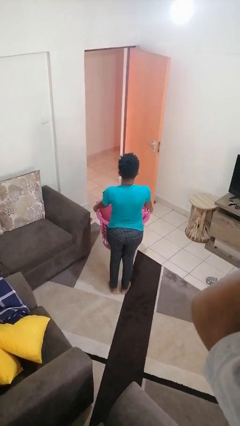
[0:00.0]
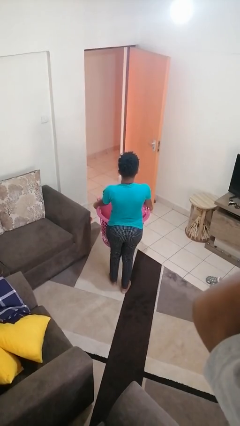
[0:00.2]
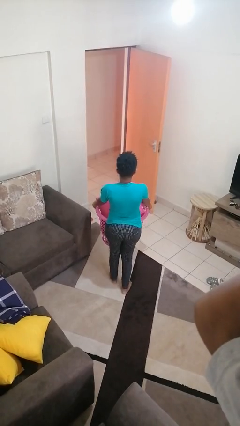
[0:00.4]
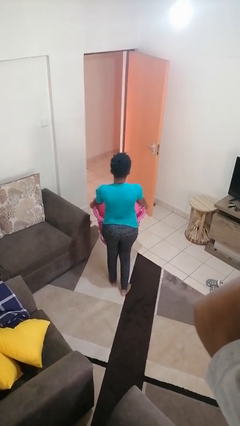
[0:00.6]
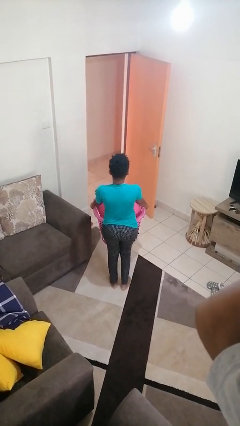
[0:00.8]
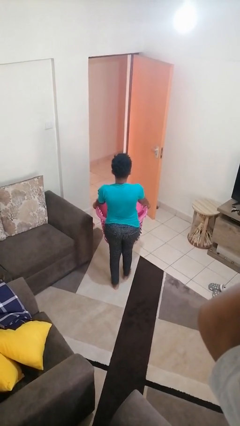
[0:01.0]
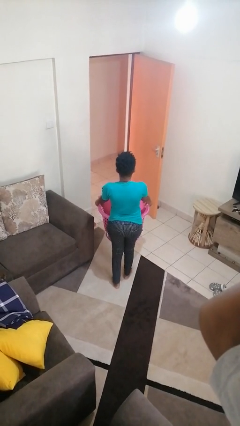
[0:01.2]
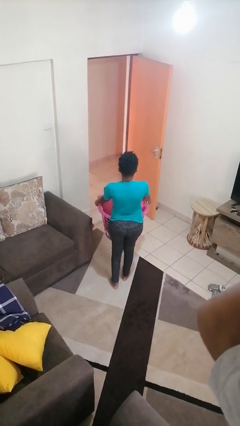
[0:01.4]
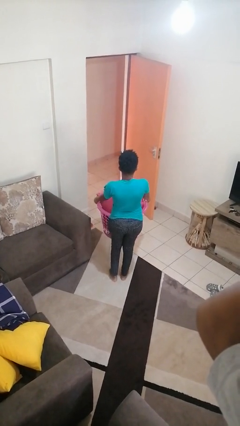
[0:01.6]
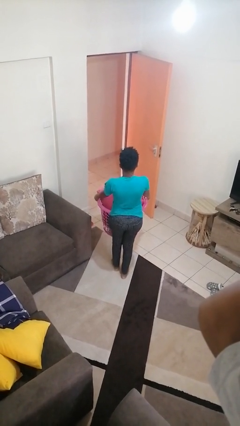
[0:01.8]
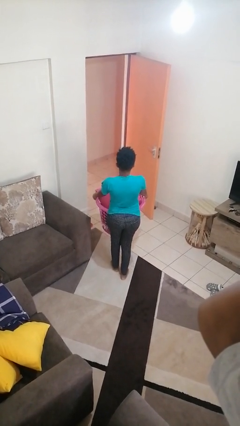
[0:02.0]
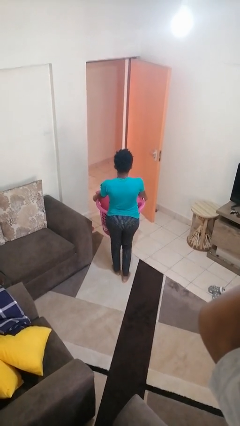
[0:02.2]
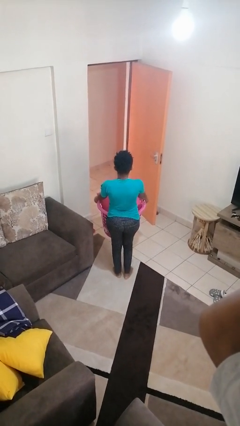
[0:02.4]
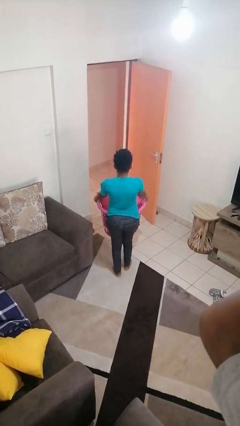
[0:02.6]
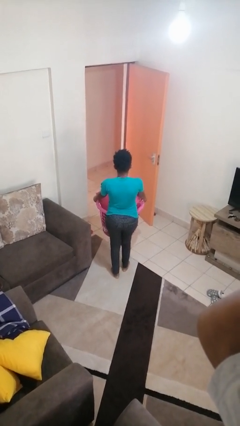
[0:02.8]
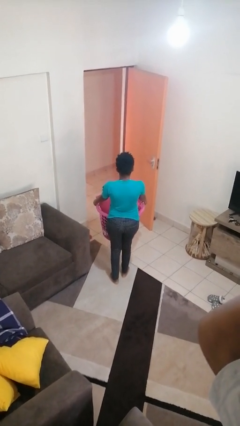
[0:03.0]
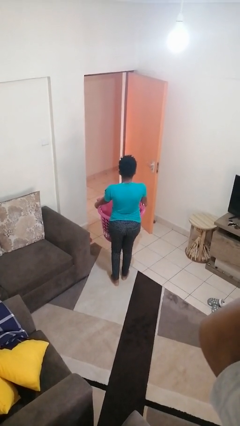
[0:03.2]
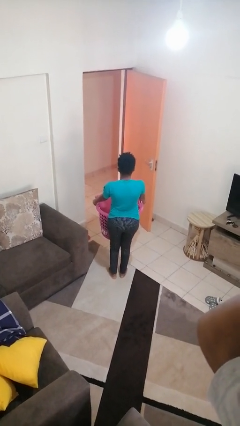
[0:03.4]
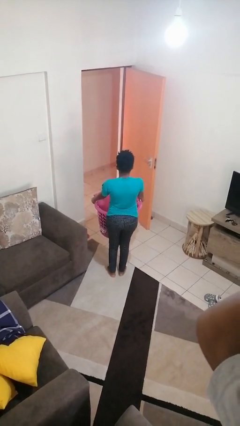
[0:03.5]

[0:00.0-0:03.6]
person carries laundry basket

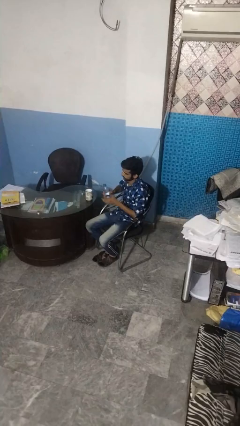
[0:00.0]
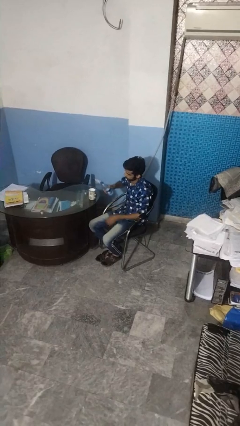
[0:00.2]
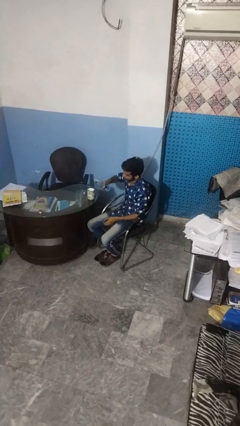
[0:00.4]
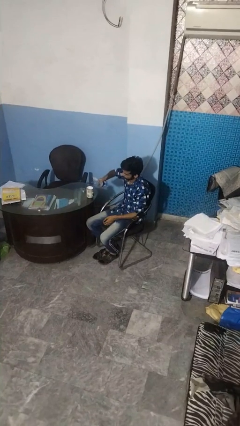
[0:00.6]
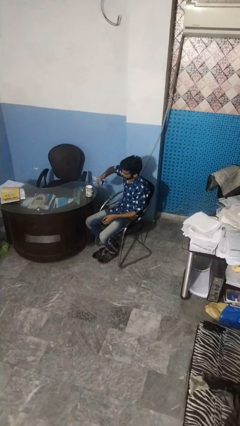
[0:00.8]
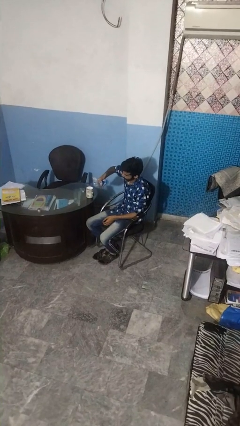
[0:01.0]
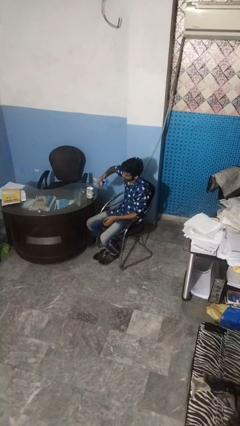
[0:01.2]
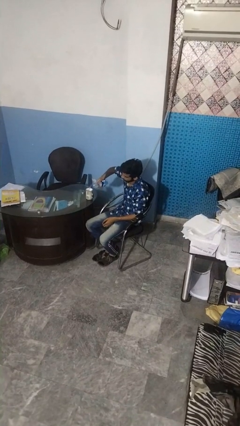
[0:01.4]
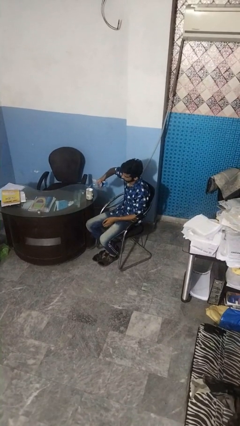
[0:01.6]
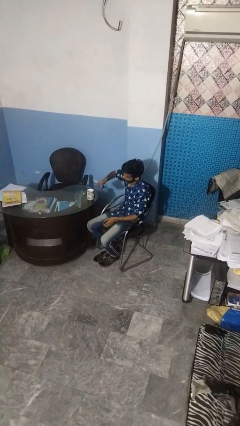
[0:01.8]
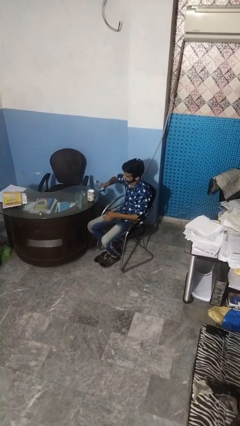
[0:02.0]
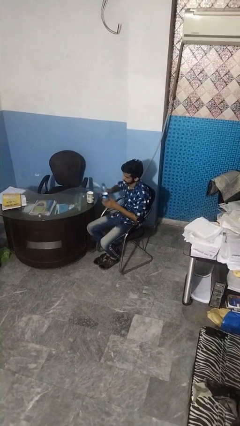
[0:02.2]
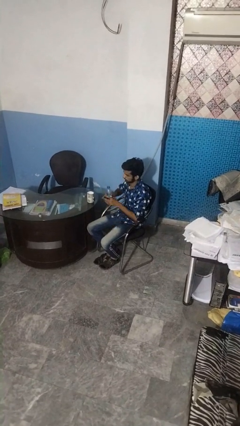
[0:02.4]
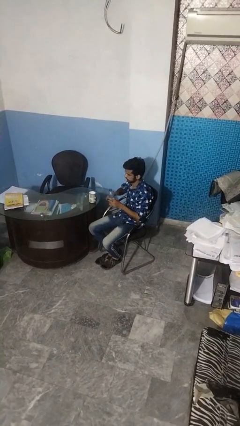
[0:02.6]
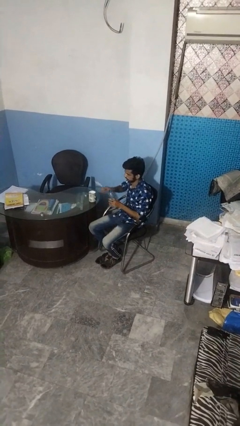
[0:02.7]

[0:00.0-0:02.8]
person pours liquid into cup

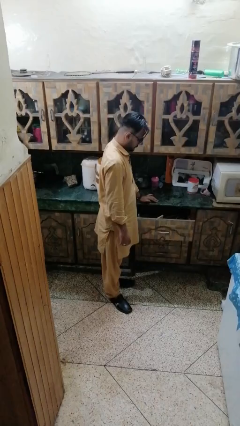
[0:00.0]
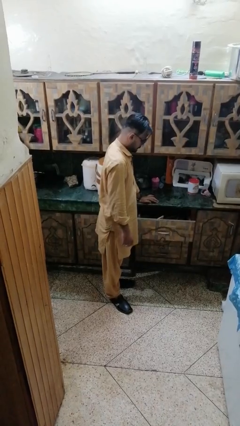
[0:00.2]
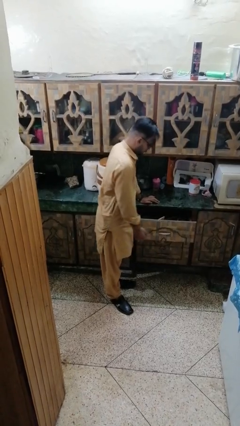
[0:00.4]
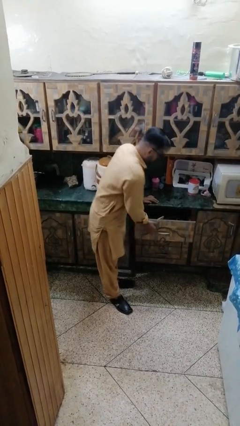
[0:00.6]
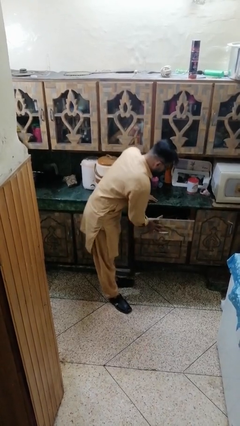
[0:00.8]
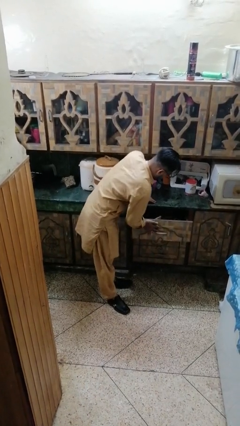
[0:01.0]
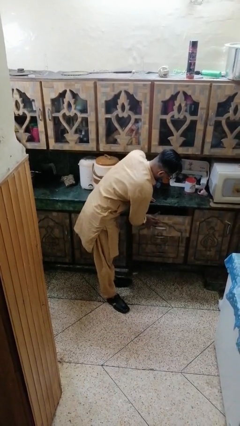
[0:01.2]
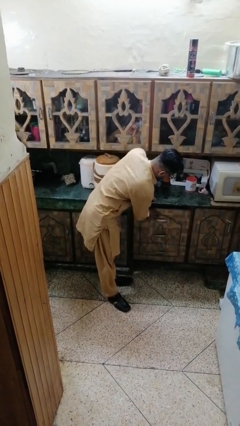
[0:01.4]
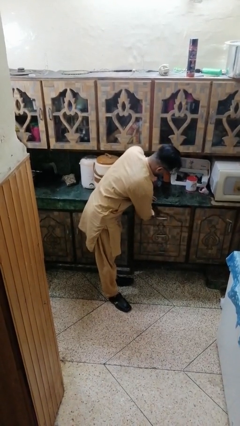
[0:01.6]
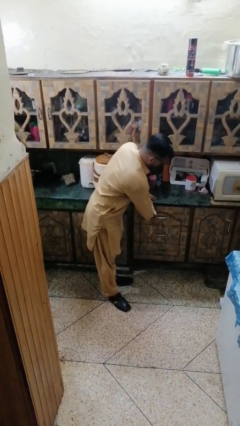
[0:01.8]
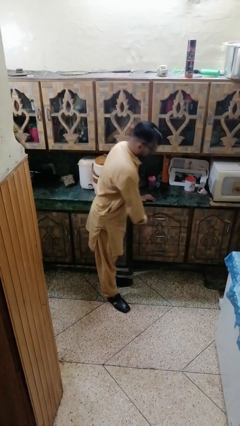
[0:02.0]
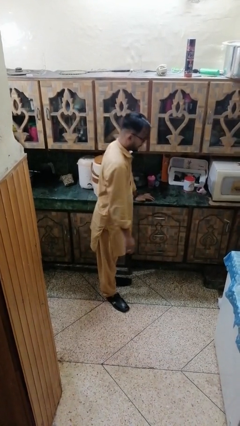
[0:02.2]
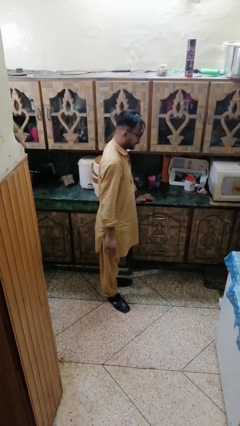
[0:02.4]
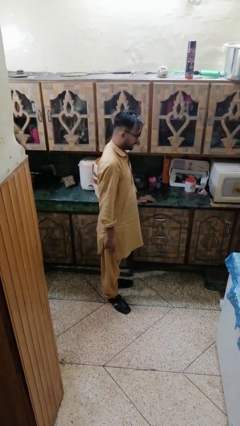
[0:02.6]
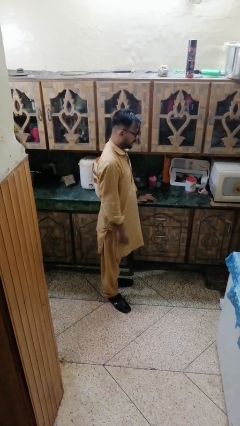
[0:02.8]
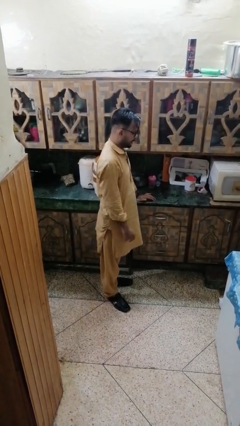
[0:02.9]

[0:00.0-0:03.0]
person closes kitchen drawer

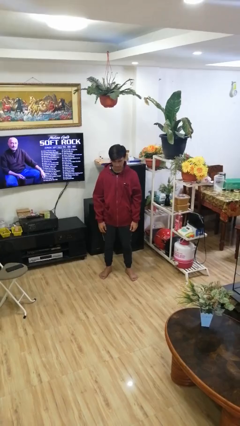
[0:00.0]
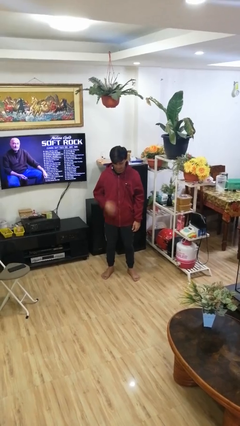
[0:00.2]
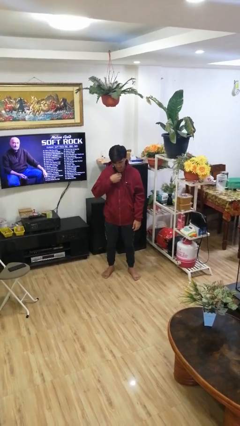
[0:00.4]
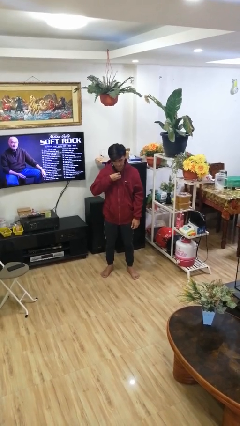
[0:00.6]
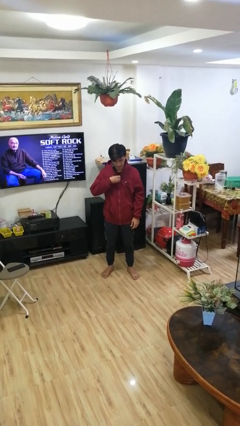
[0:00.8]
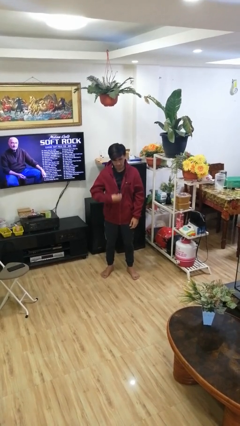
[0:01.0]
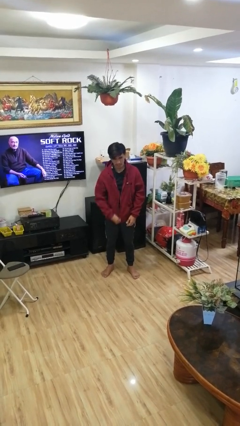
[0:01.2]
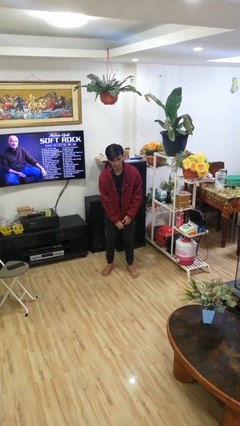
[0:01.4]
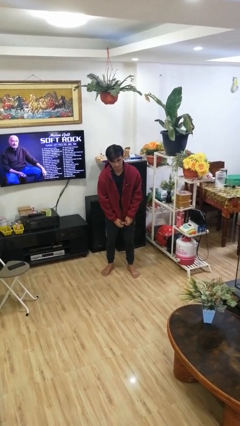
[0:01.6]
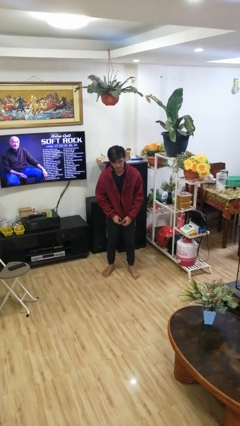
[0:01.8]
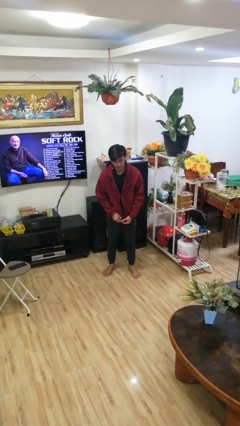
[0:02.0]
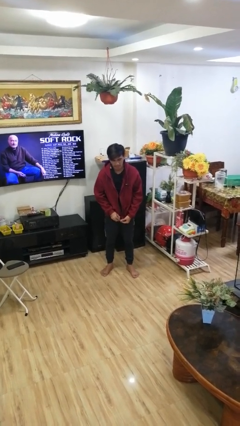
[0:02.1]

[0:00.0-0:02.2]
person unzips jacket

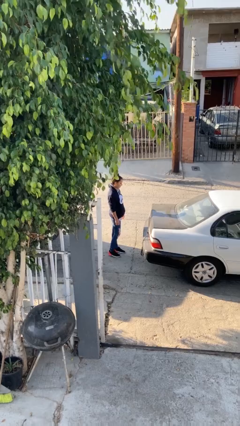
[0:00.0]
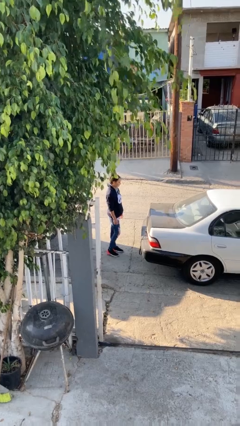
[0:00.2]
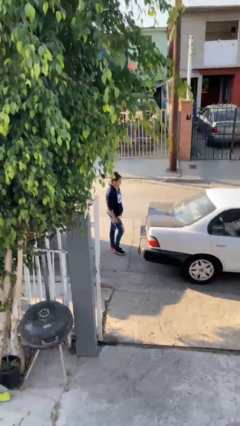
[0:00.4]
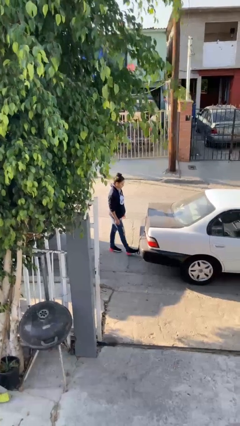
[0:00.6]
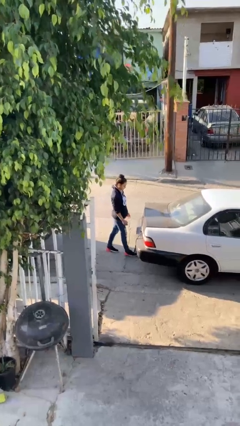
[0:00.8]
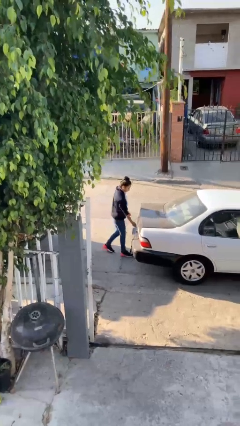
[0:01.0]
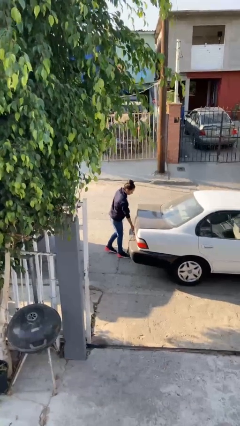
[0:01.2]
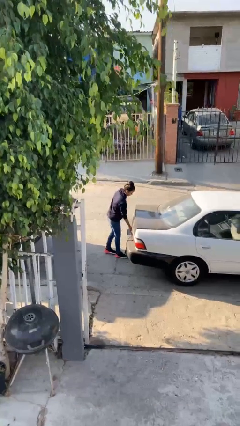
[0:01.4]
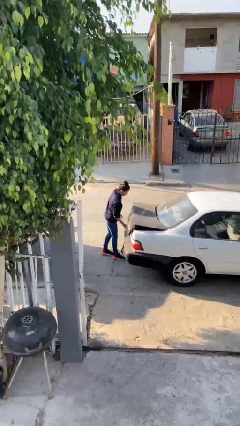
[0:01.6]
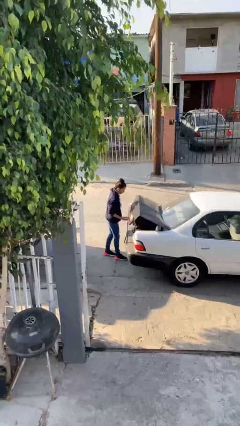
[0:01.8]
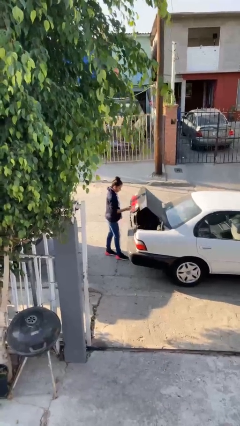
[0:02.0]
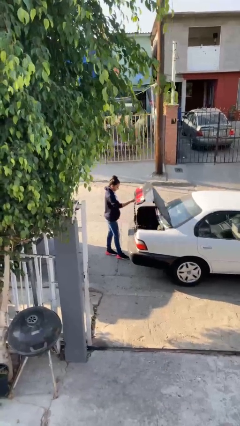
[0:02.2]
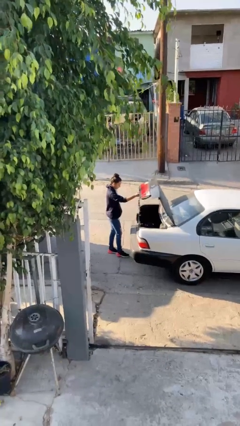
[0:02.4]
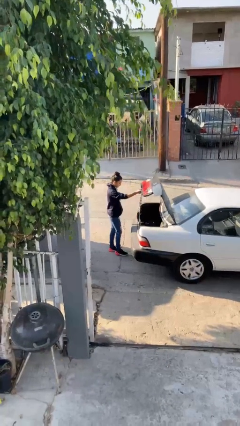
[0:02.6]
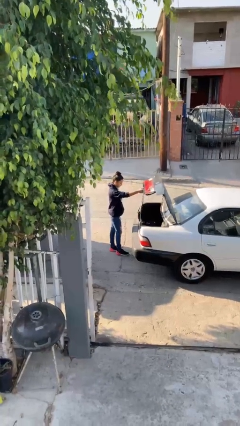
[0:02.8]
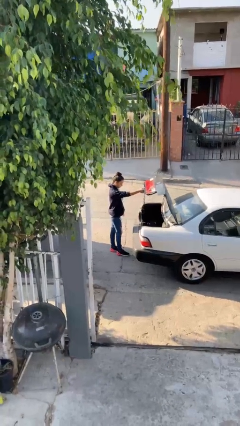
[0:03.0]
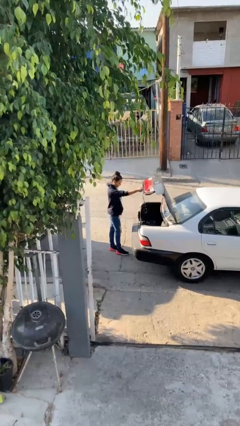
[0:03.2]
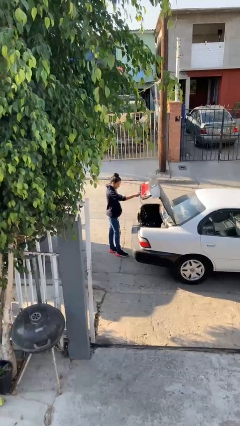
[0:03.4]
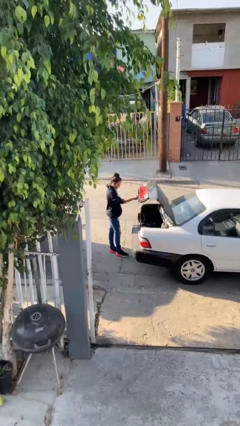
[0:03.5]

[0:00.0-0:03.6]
person opens car trunk

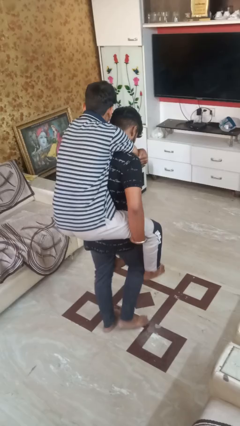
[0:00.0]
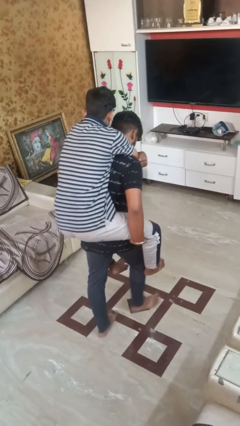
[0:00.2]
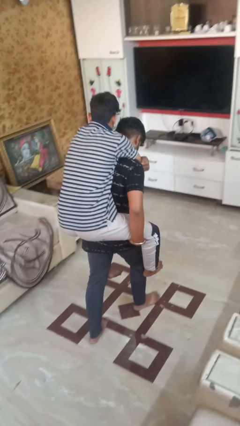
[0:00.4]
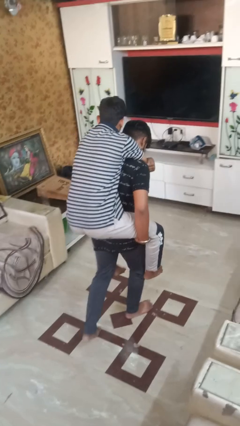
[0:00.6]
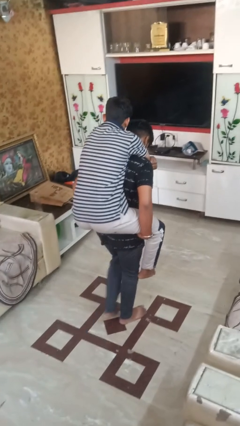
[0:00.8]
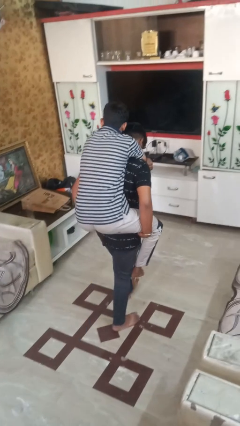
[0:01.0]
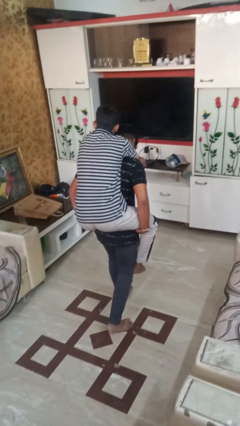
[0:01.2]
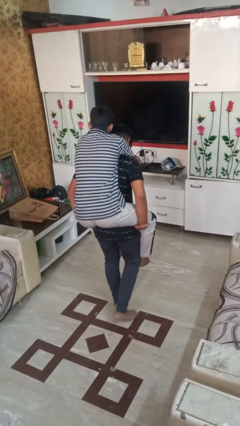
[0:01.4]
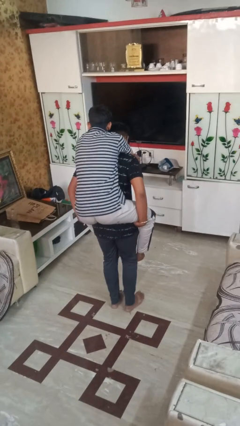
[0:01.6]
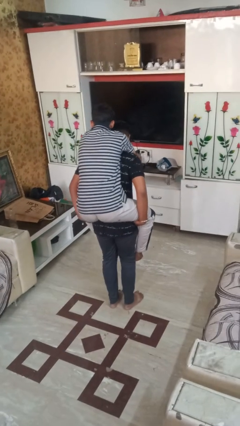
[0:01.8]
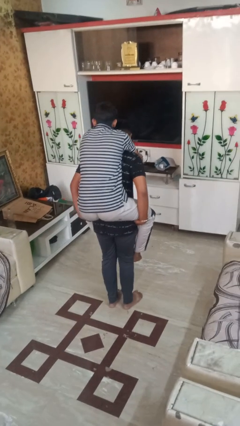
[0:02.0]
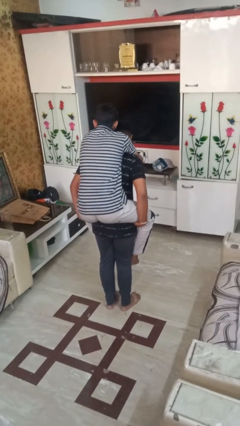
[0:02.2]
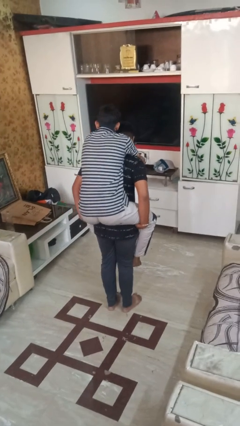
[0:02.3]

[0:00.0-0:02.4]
person carries person on back
